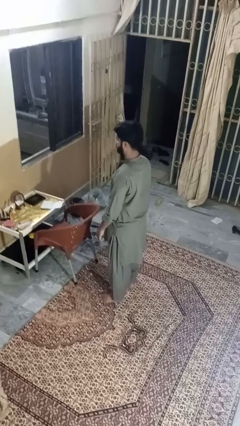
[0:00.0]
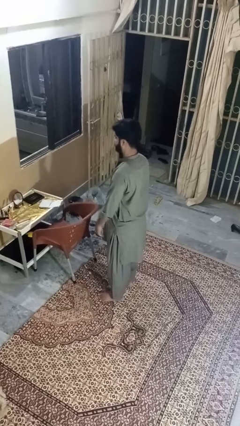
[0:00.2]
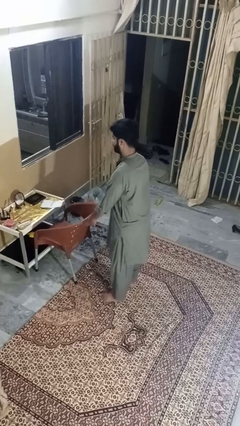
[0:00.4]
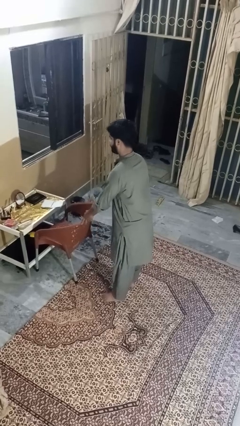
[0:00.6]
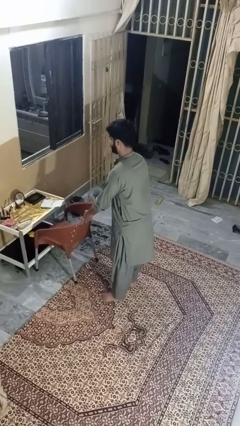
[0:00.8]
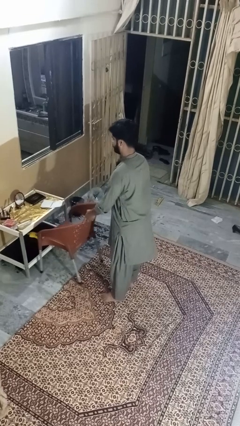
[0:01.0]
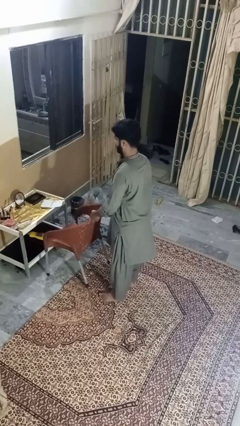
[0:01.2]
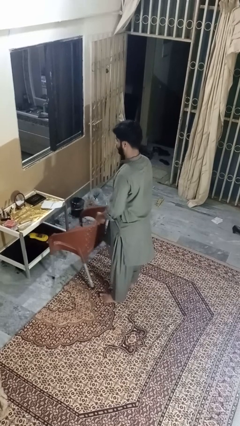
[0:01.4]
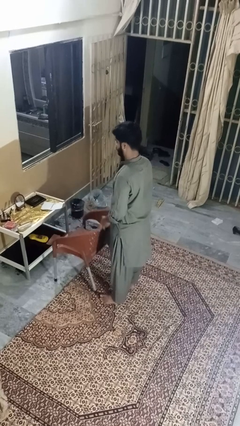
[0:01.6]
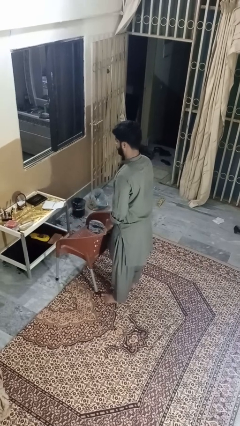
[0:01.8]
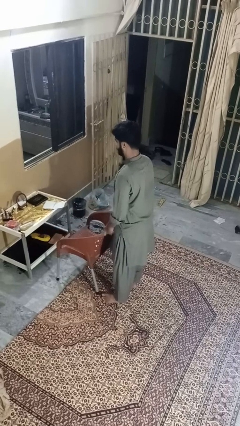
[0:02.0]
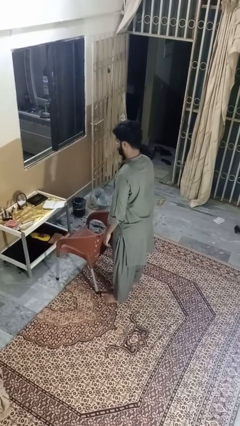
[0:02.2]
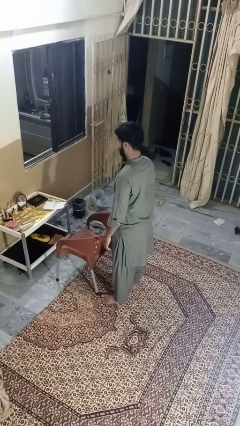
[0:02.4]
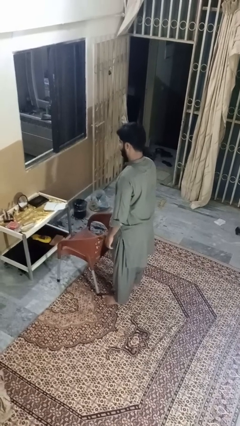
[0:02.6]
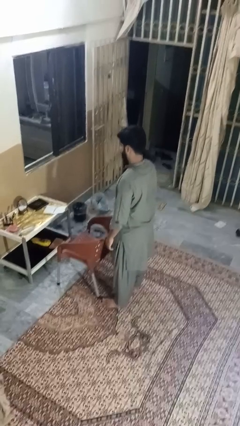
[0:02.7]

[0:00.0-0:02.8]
person pulls out chair

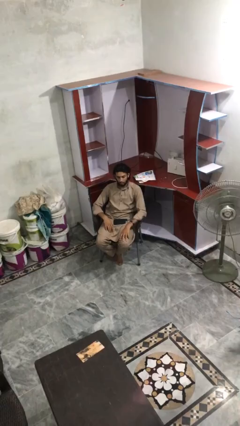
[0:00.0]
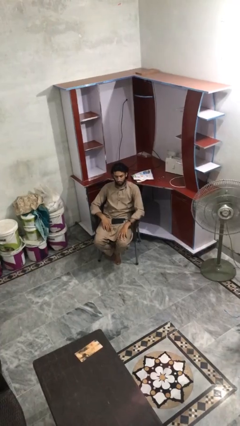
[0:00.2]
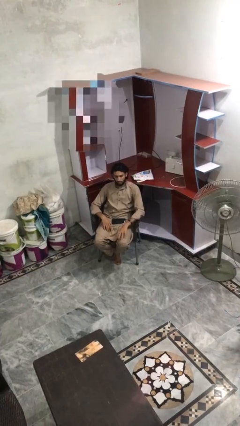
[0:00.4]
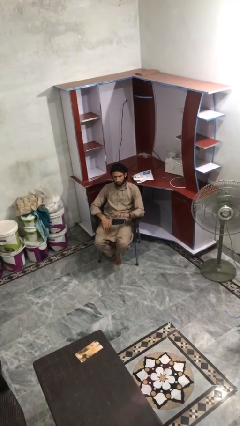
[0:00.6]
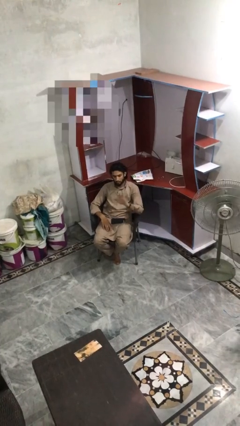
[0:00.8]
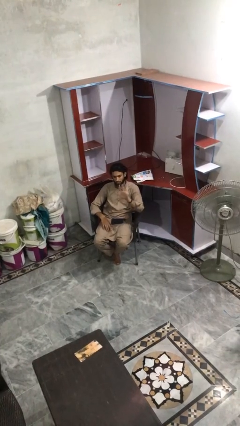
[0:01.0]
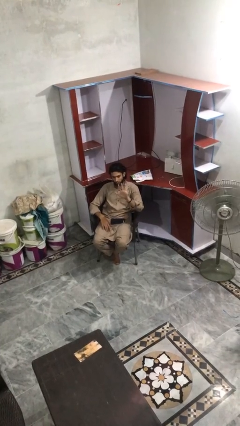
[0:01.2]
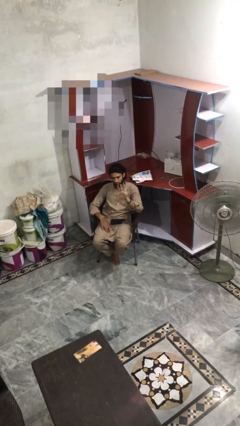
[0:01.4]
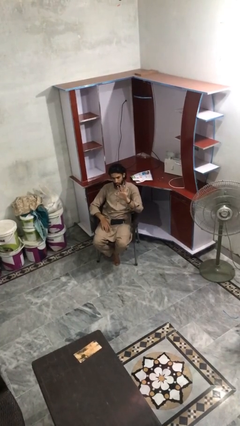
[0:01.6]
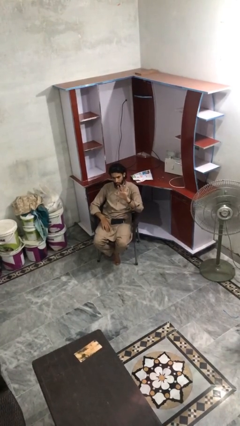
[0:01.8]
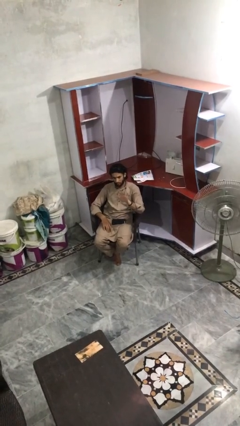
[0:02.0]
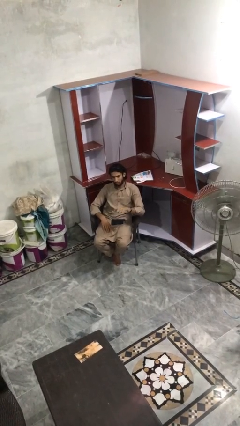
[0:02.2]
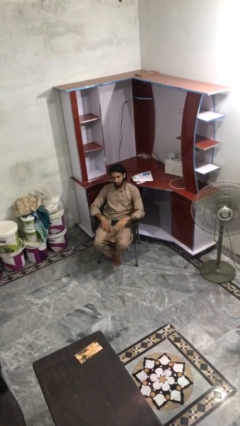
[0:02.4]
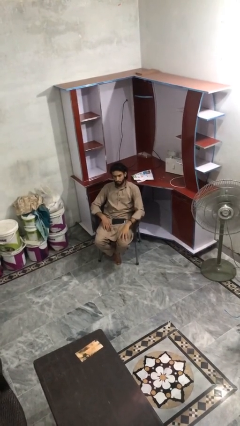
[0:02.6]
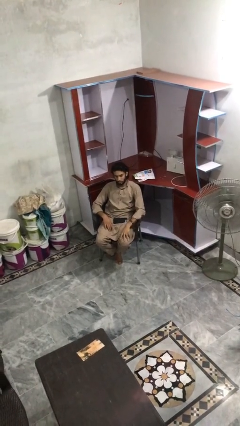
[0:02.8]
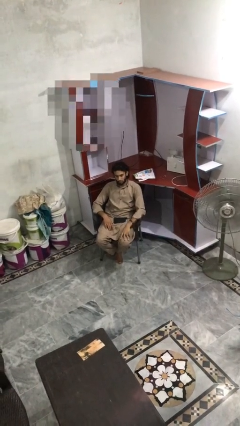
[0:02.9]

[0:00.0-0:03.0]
person gestures number five

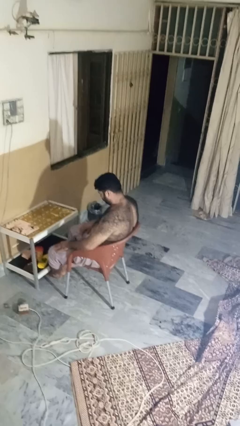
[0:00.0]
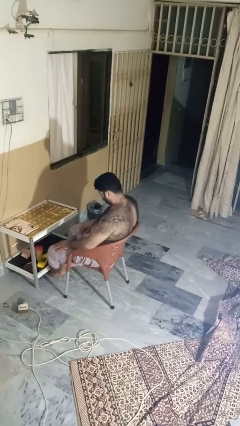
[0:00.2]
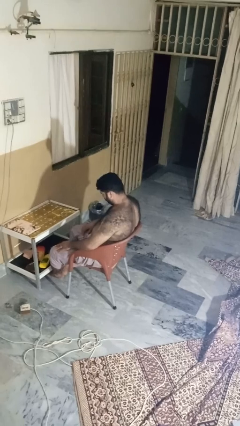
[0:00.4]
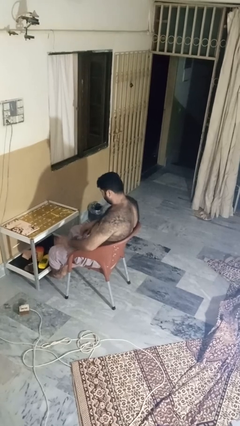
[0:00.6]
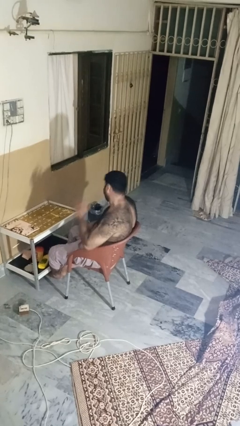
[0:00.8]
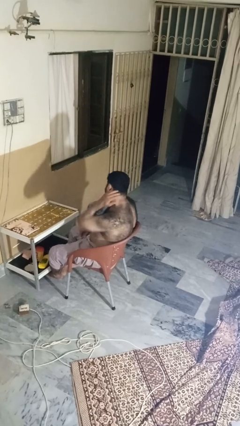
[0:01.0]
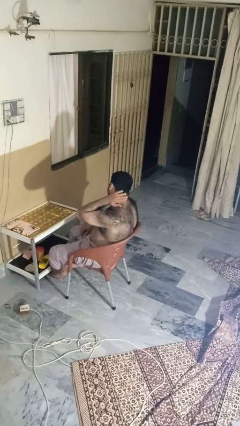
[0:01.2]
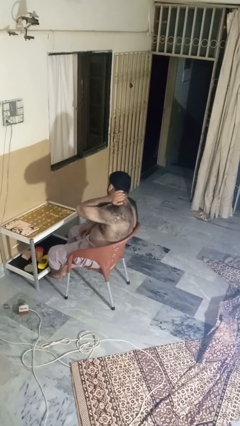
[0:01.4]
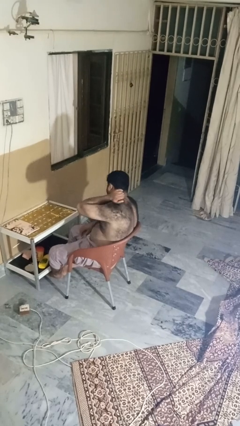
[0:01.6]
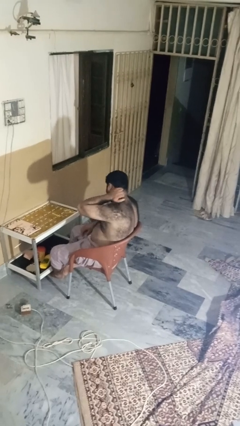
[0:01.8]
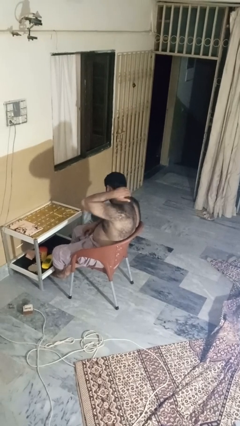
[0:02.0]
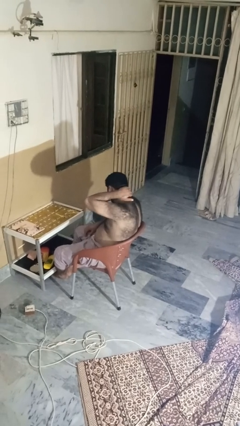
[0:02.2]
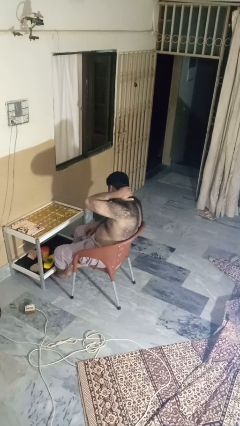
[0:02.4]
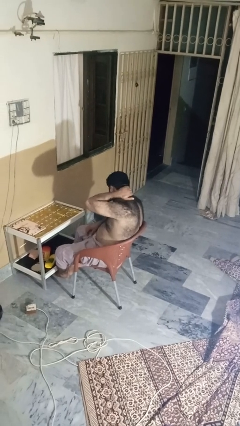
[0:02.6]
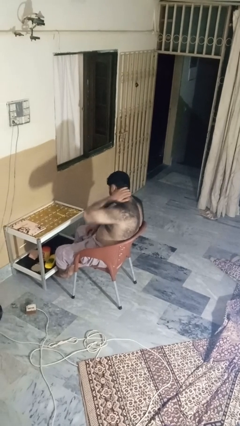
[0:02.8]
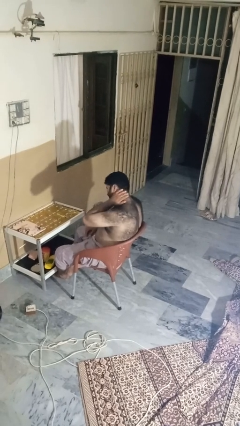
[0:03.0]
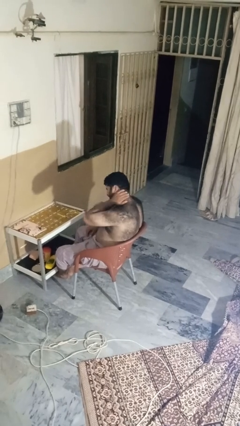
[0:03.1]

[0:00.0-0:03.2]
person rubs neck

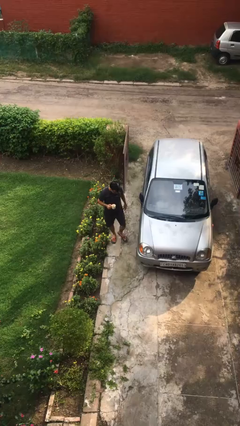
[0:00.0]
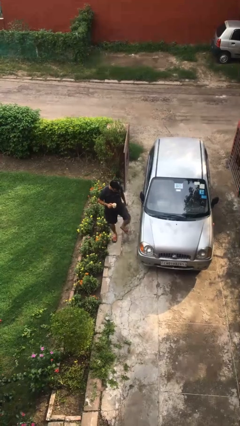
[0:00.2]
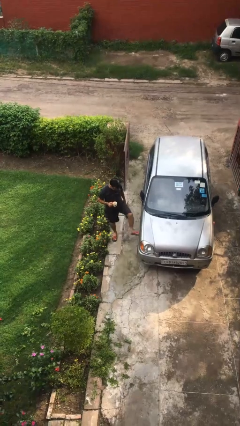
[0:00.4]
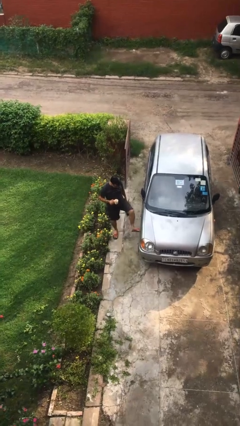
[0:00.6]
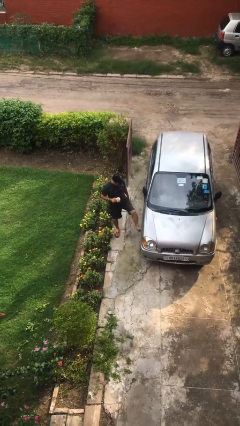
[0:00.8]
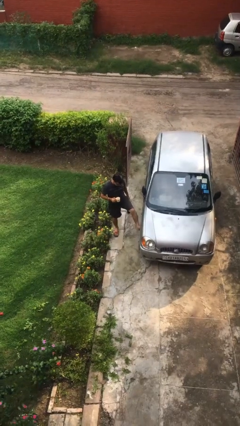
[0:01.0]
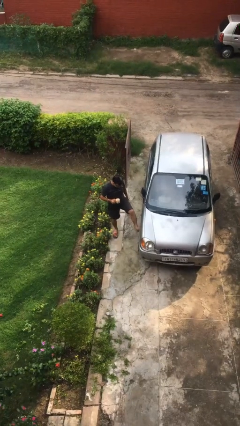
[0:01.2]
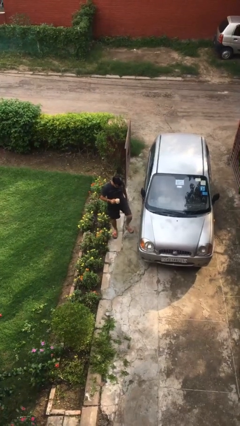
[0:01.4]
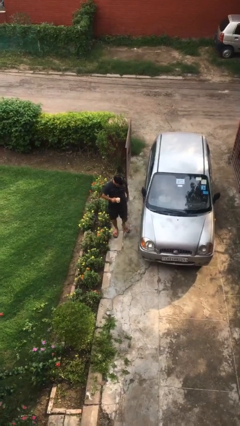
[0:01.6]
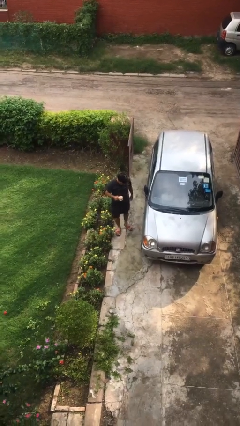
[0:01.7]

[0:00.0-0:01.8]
person kicks car tires

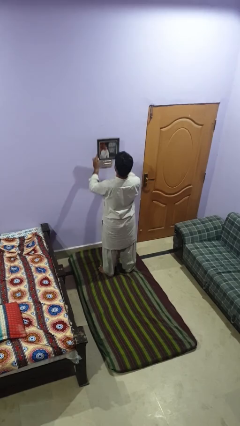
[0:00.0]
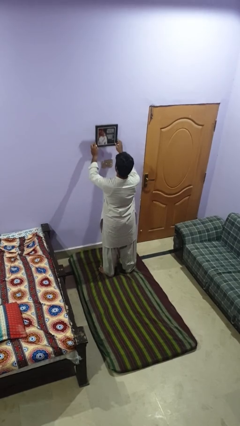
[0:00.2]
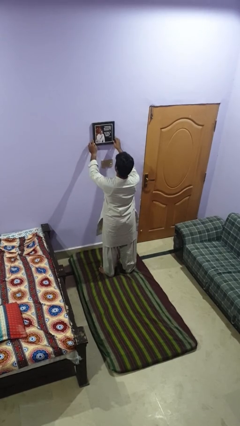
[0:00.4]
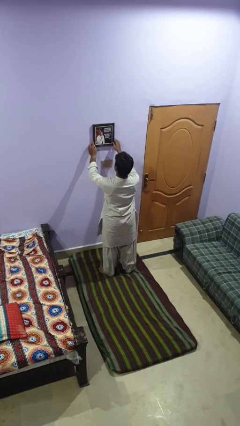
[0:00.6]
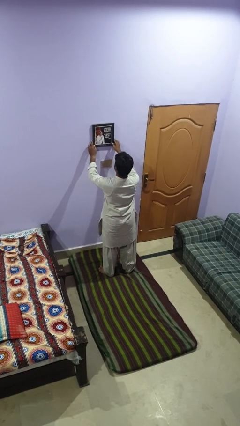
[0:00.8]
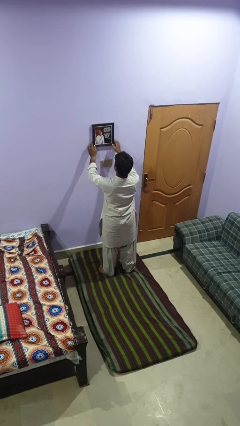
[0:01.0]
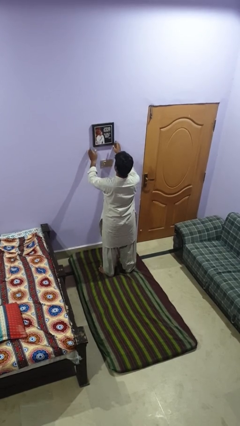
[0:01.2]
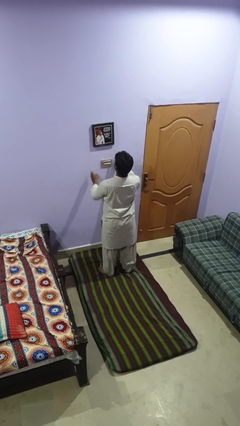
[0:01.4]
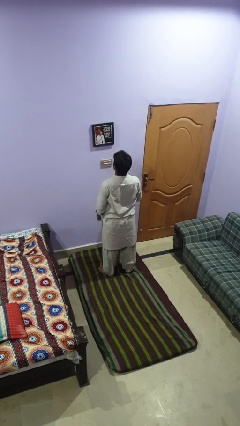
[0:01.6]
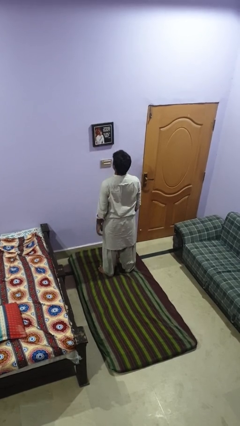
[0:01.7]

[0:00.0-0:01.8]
person puts up picture frame

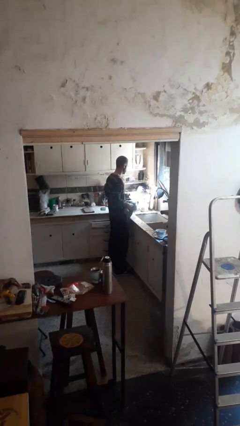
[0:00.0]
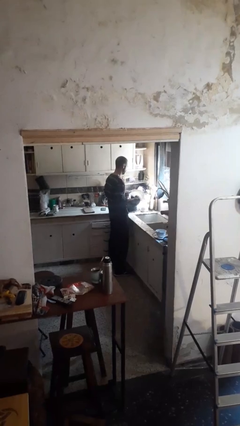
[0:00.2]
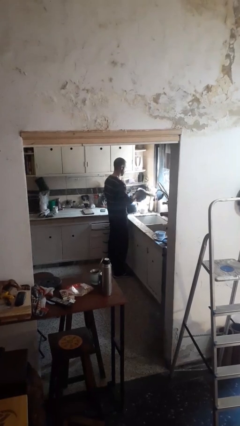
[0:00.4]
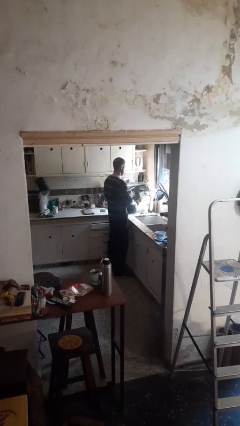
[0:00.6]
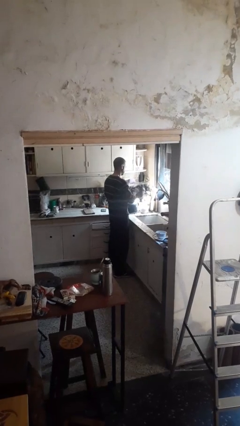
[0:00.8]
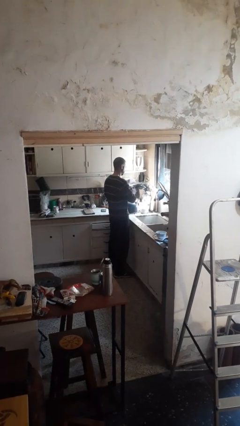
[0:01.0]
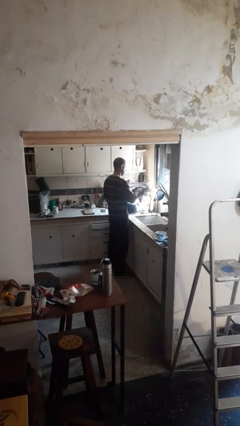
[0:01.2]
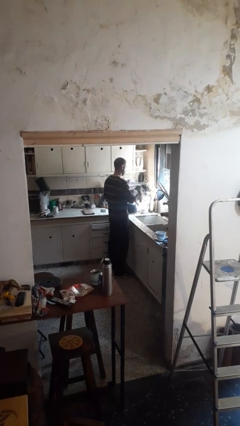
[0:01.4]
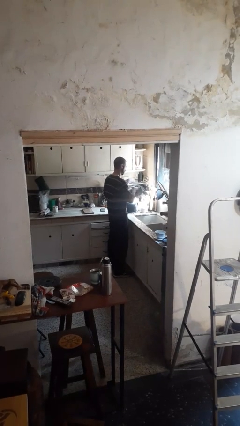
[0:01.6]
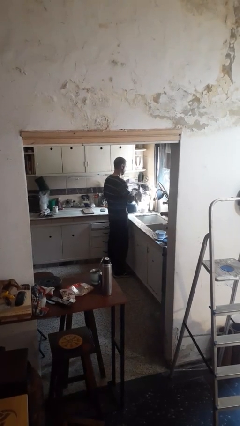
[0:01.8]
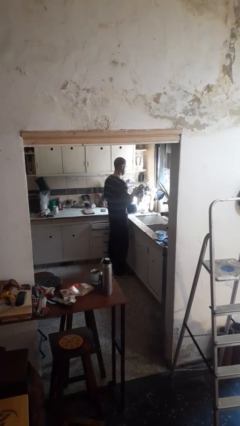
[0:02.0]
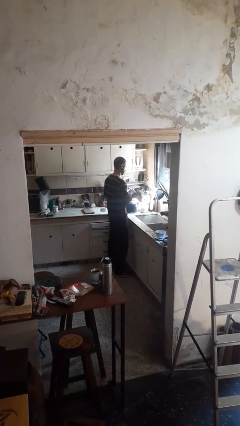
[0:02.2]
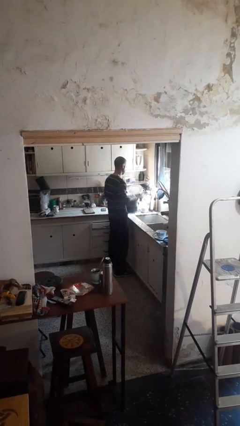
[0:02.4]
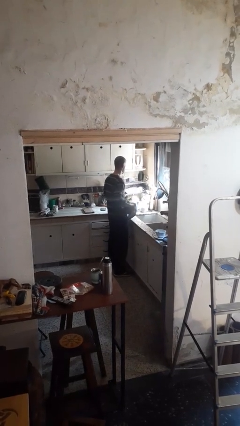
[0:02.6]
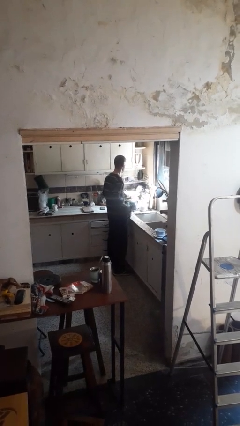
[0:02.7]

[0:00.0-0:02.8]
person dries dish

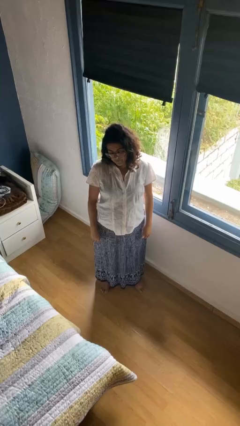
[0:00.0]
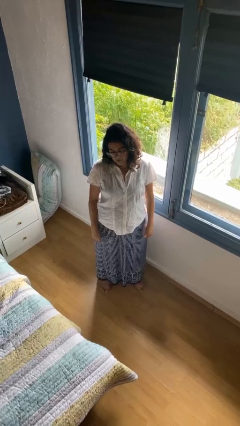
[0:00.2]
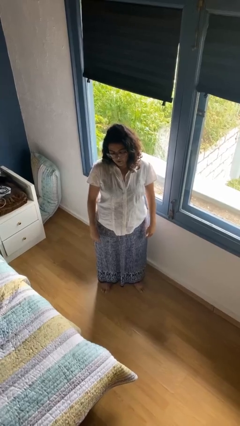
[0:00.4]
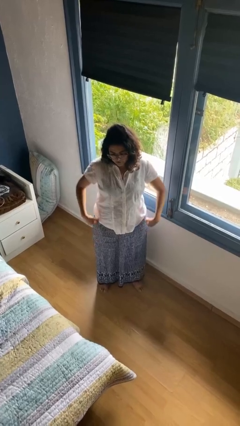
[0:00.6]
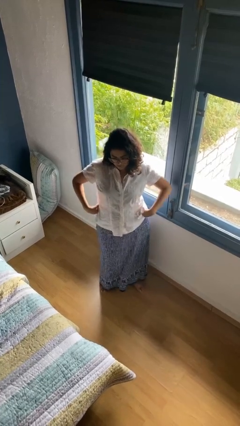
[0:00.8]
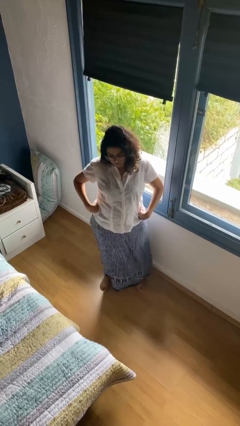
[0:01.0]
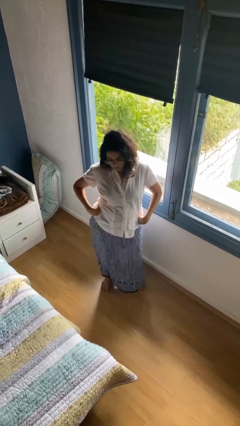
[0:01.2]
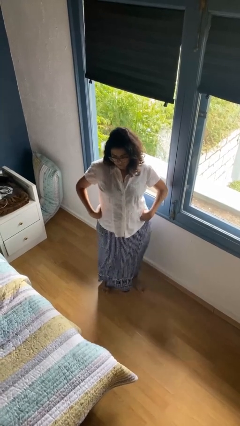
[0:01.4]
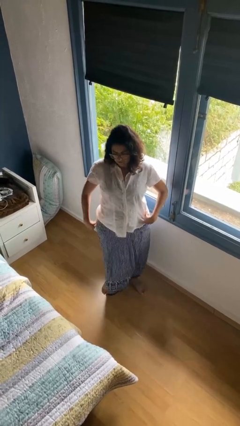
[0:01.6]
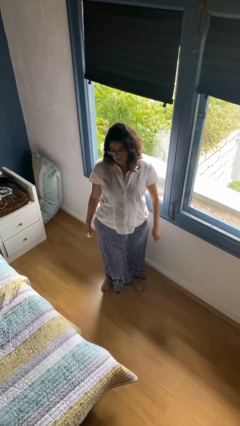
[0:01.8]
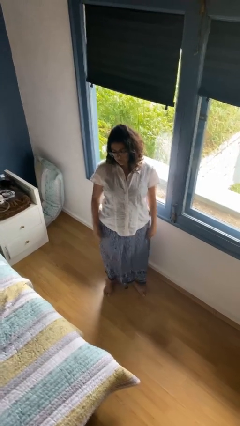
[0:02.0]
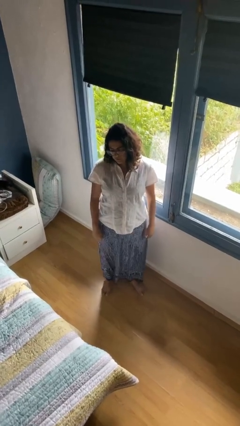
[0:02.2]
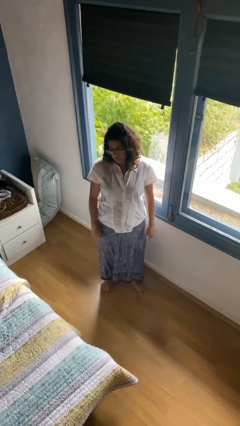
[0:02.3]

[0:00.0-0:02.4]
person wiggles hips
